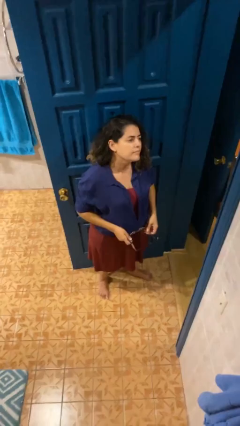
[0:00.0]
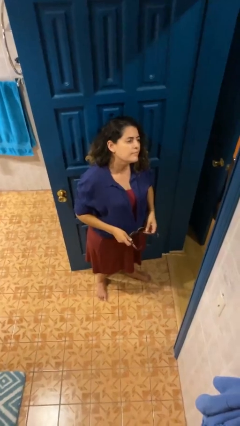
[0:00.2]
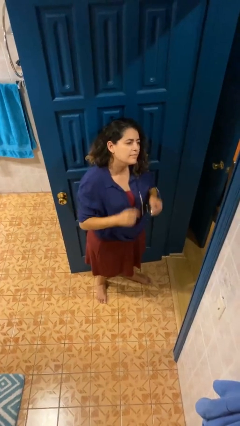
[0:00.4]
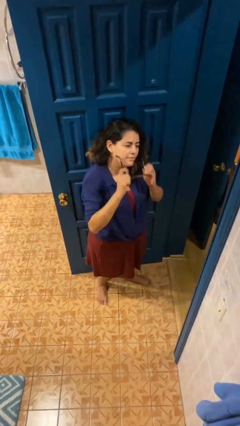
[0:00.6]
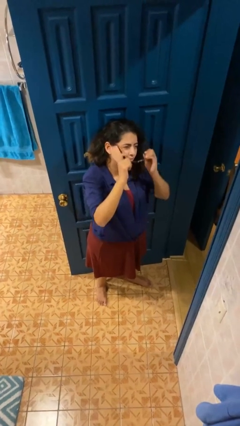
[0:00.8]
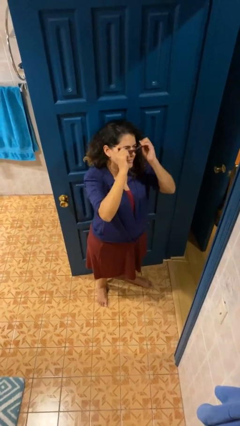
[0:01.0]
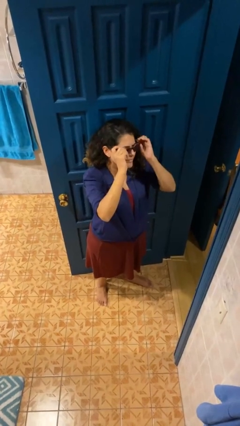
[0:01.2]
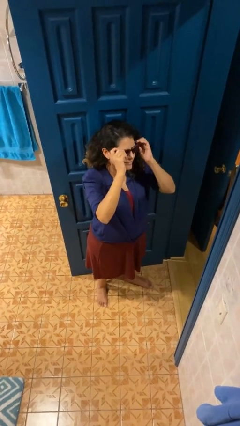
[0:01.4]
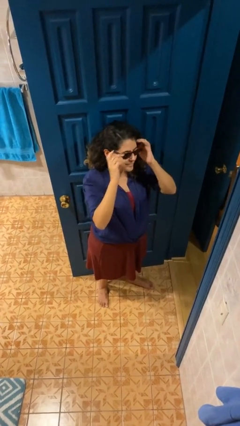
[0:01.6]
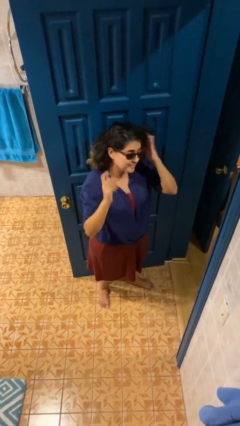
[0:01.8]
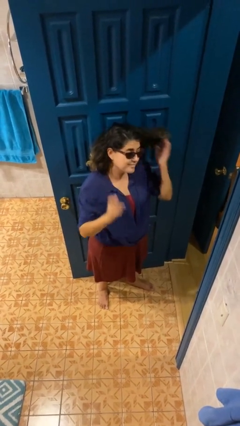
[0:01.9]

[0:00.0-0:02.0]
person puts on sunglasses

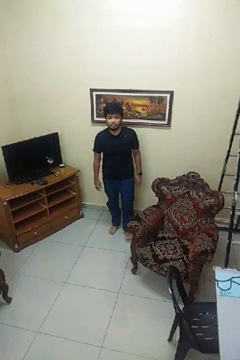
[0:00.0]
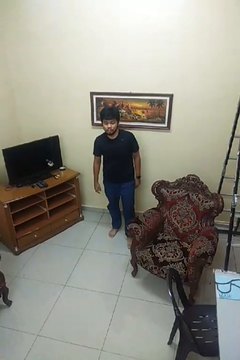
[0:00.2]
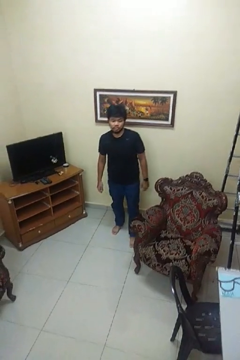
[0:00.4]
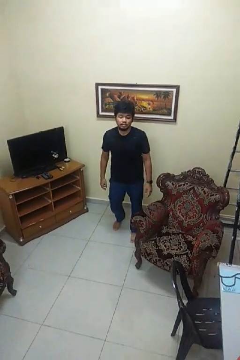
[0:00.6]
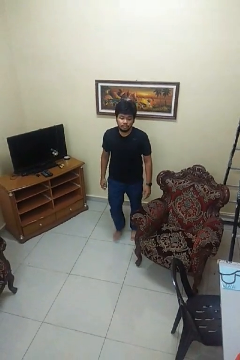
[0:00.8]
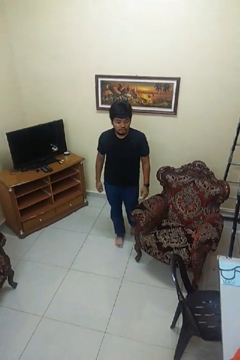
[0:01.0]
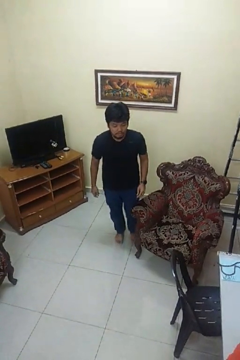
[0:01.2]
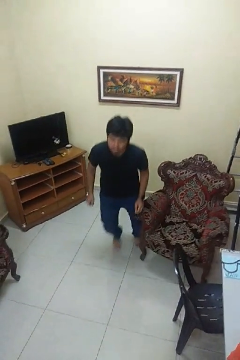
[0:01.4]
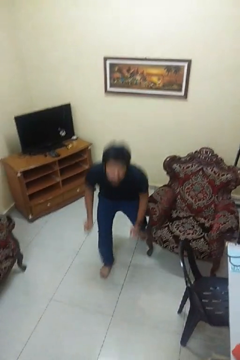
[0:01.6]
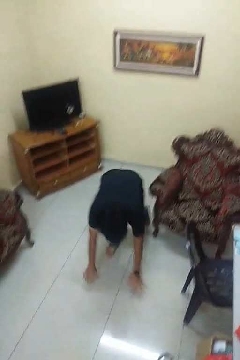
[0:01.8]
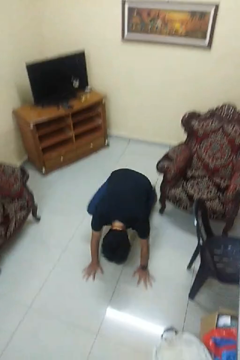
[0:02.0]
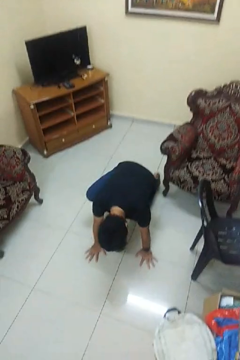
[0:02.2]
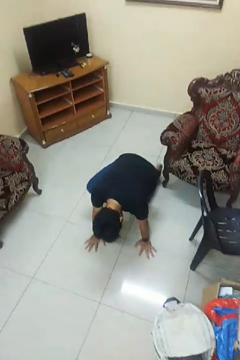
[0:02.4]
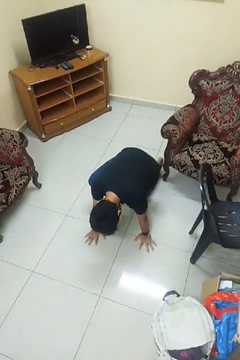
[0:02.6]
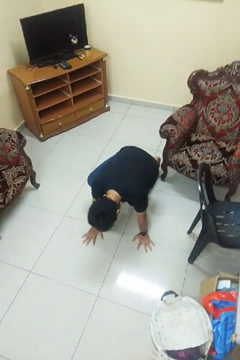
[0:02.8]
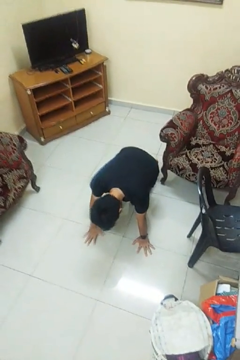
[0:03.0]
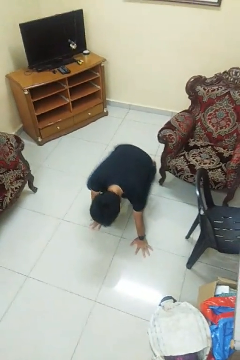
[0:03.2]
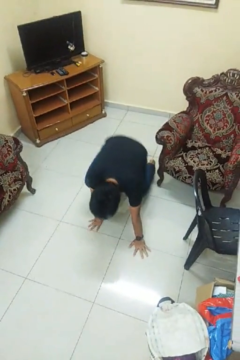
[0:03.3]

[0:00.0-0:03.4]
person trips on object on floor

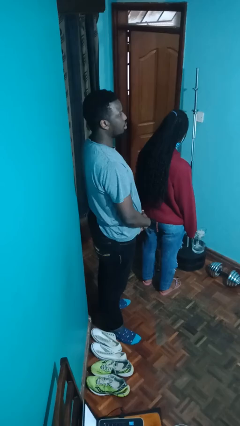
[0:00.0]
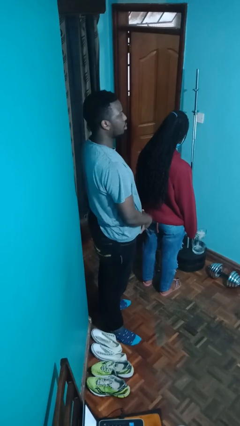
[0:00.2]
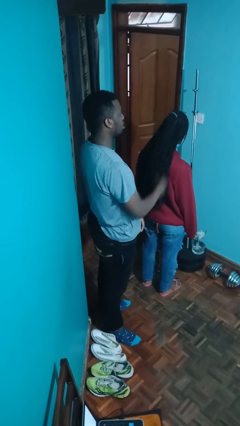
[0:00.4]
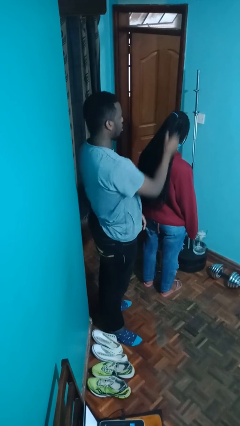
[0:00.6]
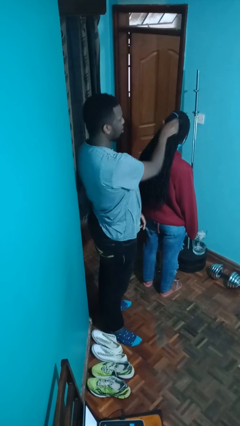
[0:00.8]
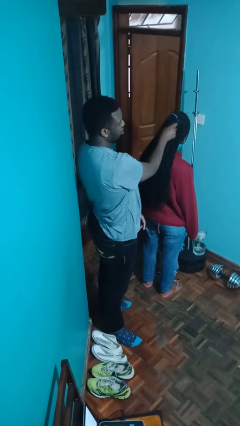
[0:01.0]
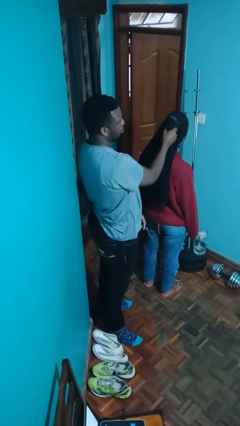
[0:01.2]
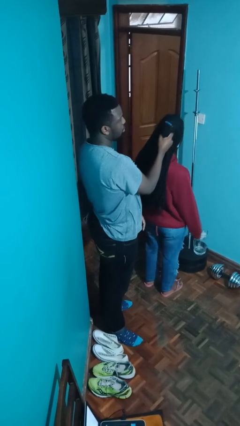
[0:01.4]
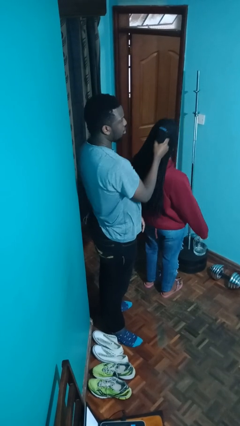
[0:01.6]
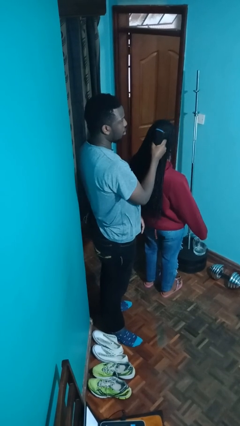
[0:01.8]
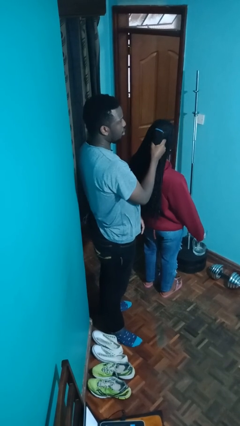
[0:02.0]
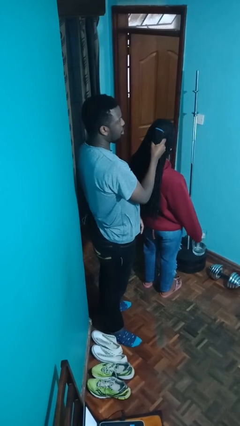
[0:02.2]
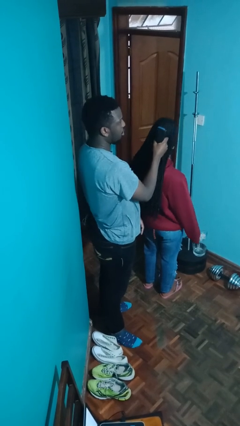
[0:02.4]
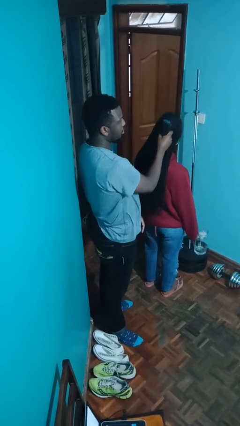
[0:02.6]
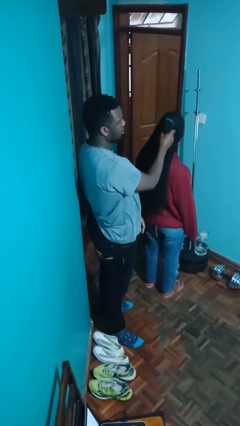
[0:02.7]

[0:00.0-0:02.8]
person grabs person by hair

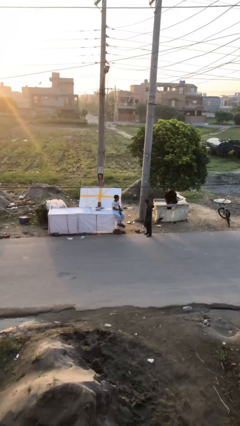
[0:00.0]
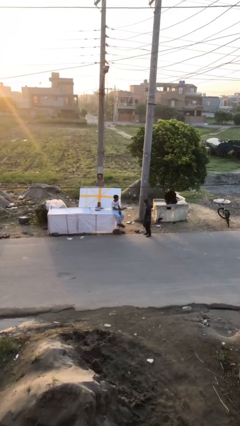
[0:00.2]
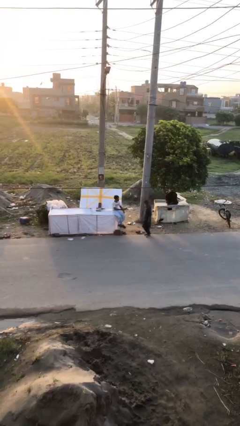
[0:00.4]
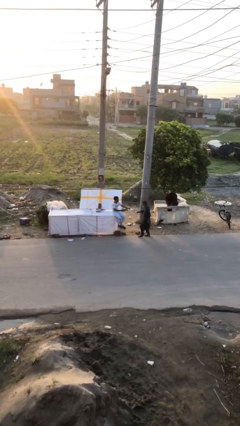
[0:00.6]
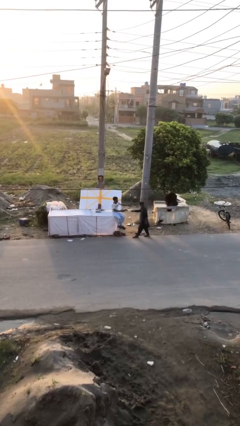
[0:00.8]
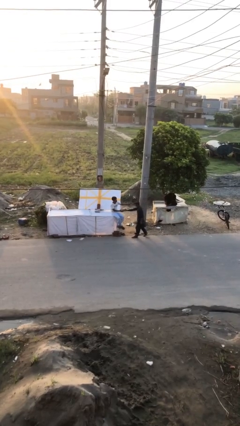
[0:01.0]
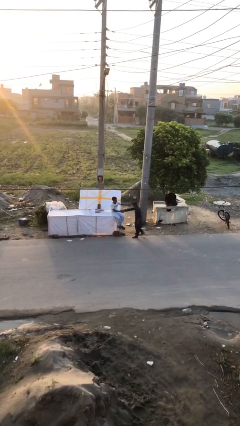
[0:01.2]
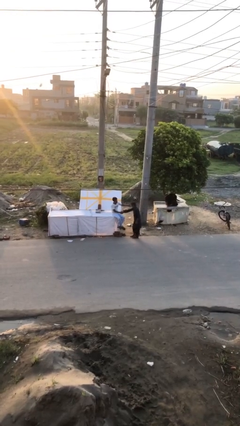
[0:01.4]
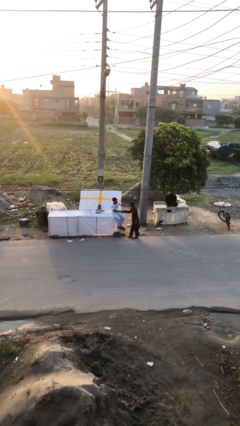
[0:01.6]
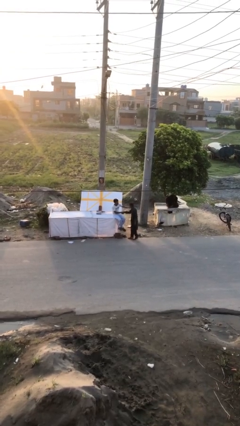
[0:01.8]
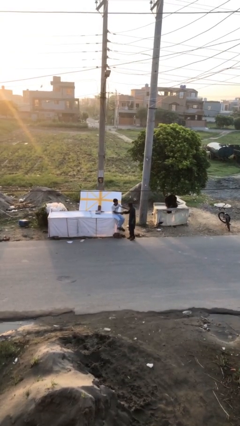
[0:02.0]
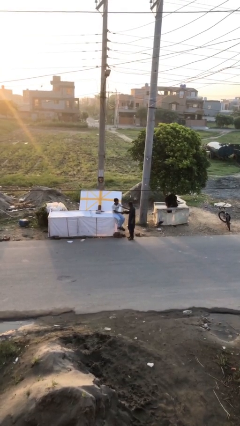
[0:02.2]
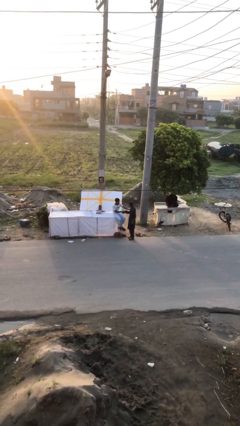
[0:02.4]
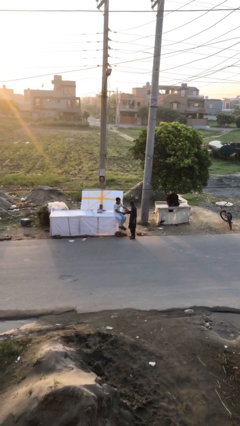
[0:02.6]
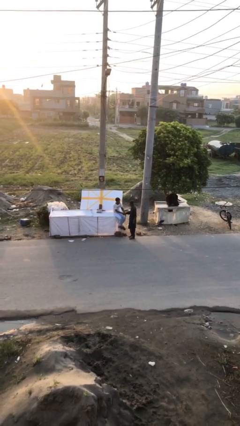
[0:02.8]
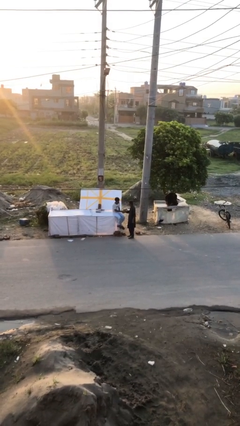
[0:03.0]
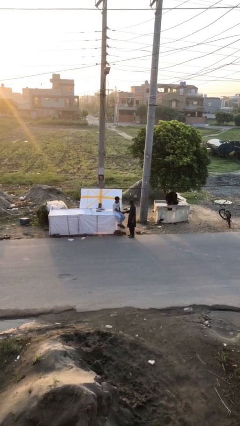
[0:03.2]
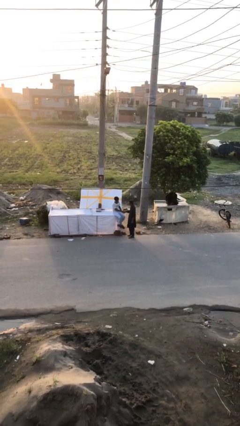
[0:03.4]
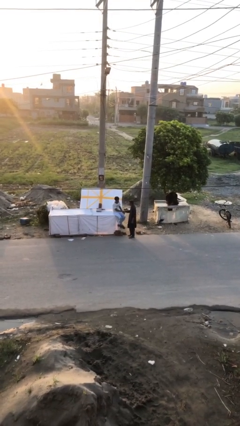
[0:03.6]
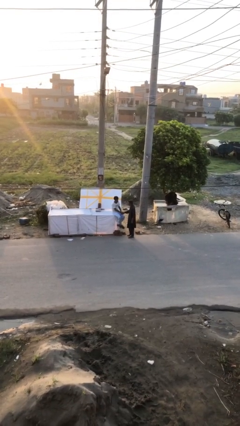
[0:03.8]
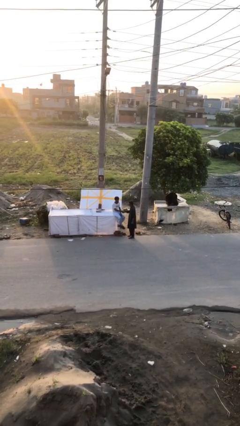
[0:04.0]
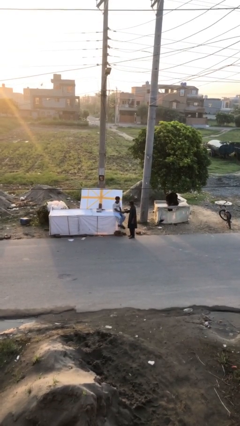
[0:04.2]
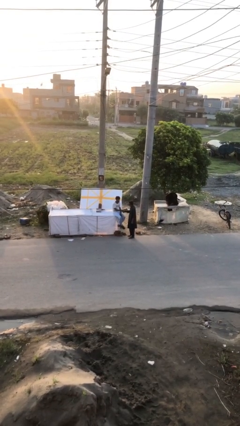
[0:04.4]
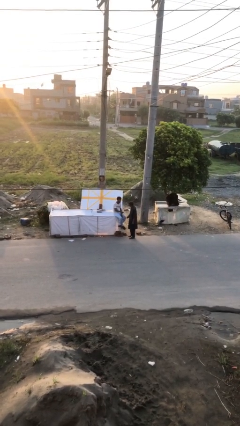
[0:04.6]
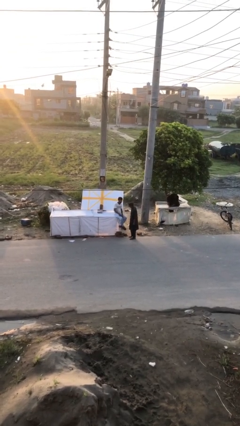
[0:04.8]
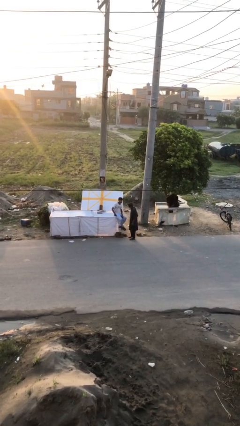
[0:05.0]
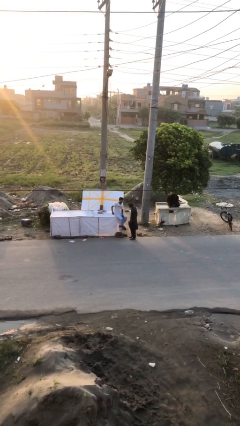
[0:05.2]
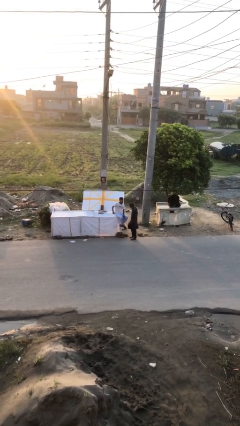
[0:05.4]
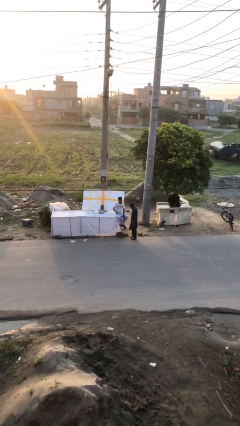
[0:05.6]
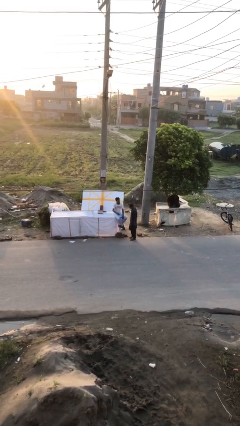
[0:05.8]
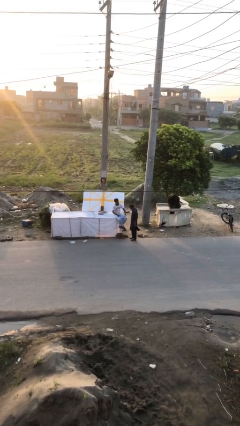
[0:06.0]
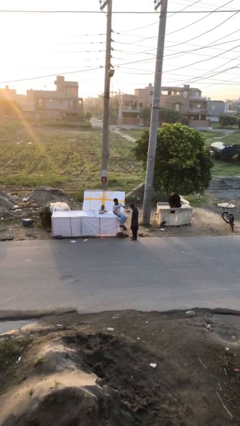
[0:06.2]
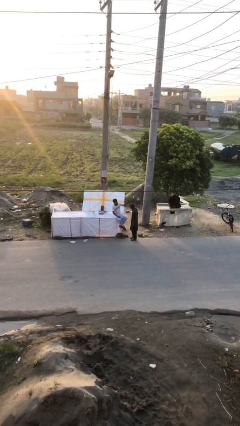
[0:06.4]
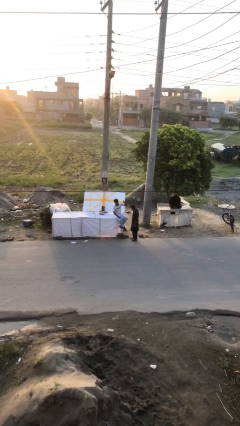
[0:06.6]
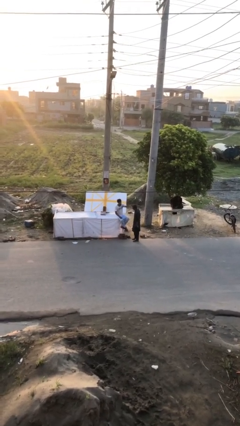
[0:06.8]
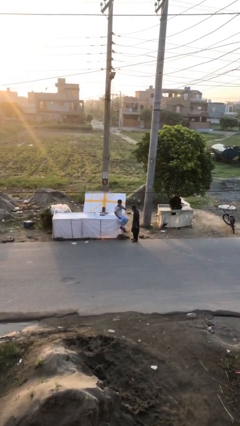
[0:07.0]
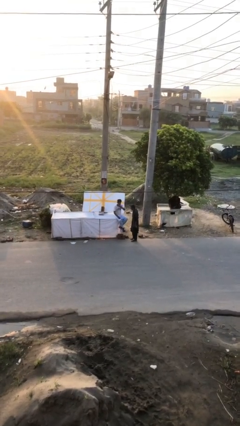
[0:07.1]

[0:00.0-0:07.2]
person shakes hand

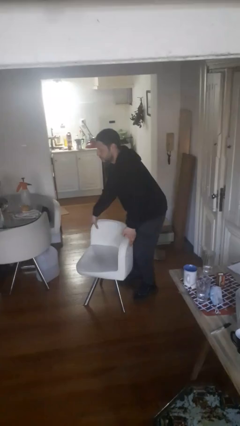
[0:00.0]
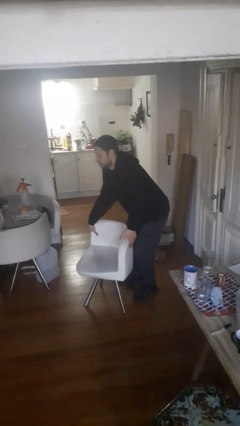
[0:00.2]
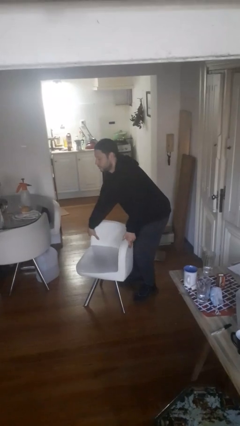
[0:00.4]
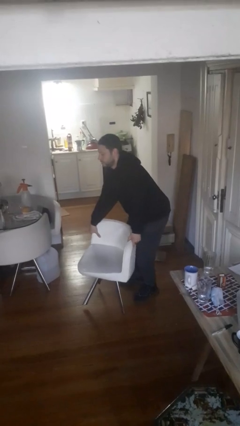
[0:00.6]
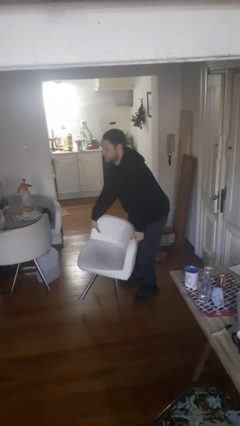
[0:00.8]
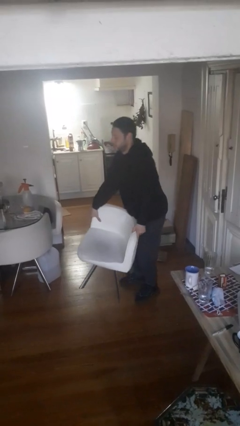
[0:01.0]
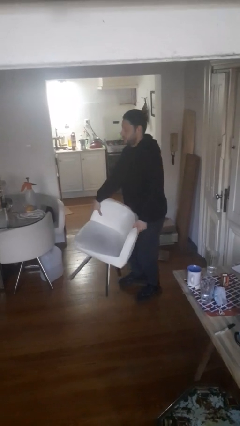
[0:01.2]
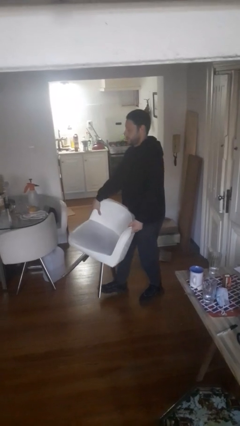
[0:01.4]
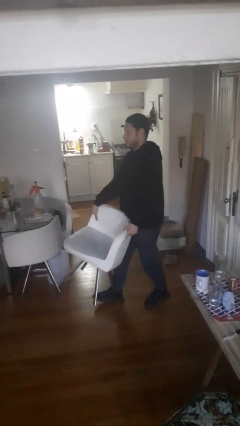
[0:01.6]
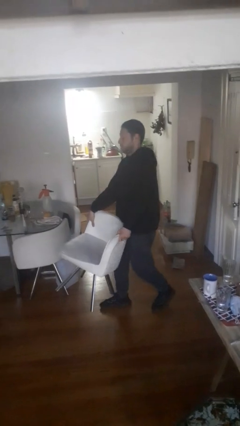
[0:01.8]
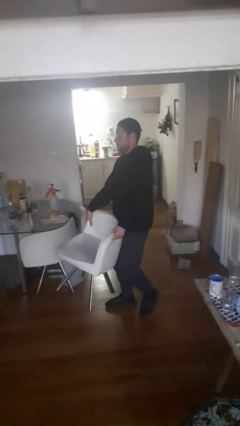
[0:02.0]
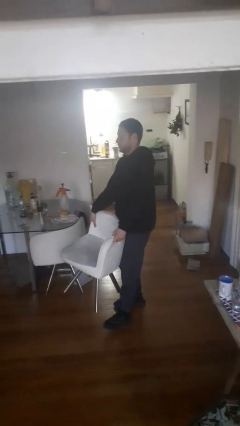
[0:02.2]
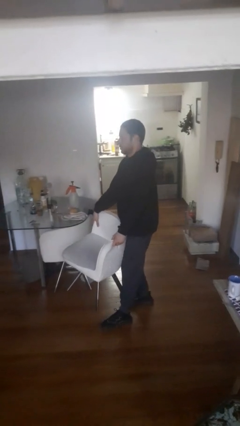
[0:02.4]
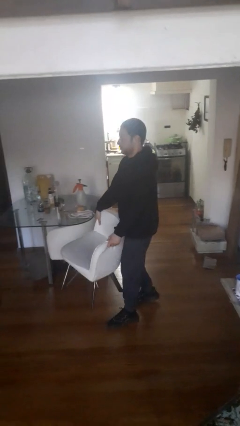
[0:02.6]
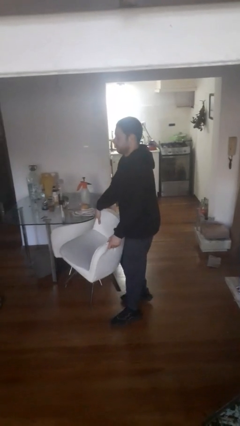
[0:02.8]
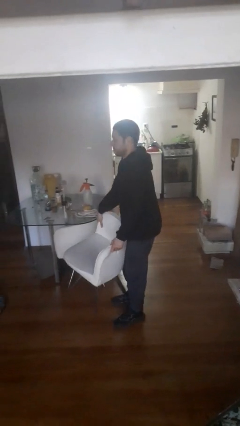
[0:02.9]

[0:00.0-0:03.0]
person carries furniture

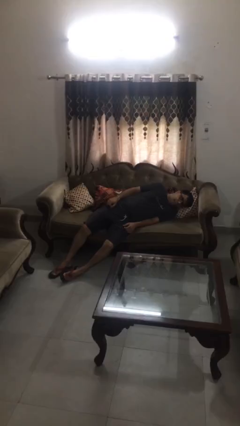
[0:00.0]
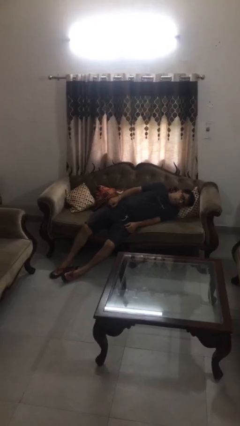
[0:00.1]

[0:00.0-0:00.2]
person stands up
